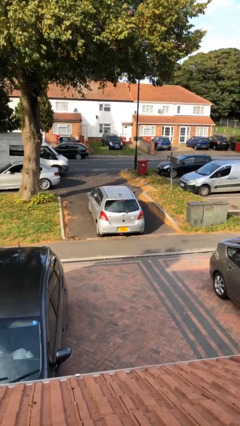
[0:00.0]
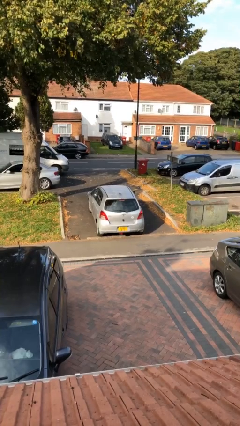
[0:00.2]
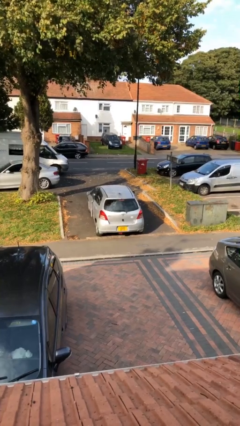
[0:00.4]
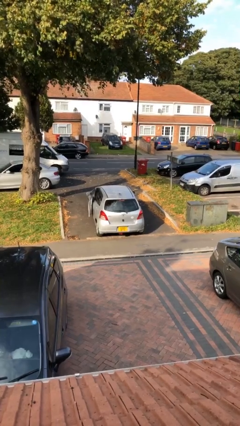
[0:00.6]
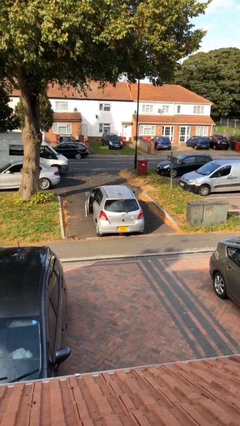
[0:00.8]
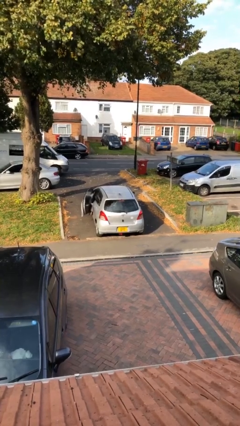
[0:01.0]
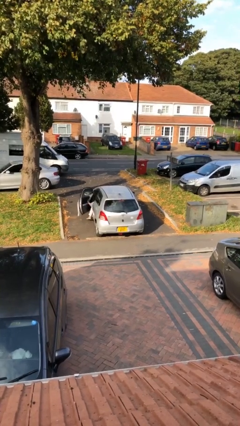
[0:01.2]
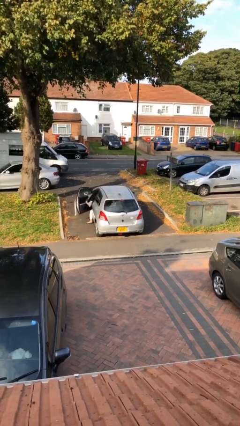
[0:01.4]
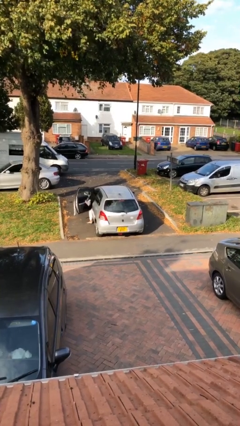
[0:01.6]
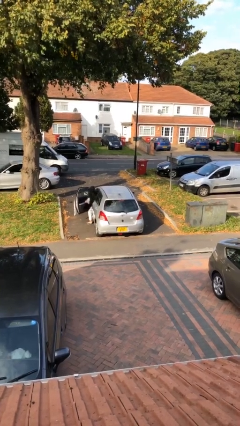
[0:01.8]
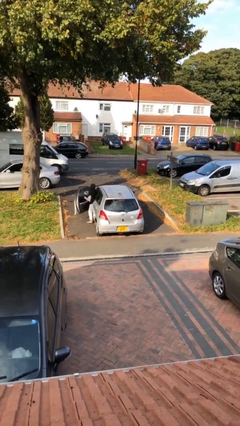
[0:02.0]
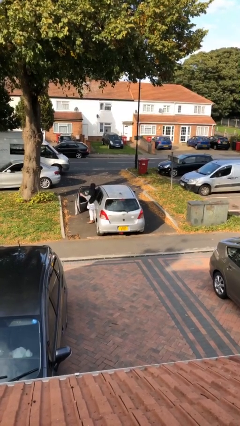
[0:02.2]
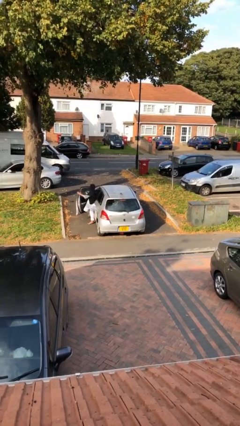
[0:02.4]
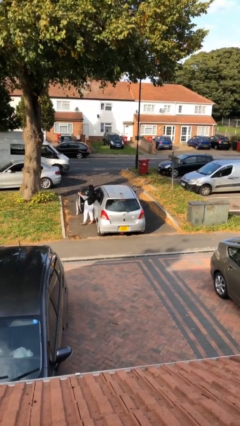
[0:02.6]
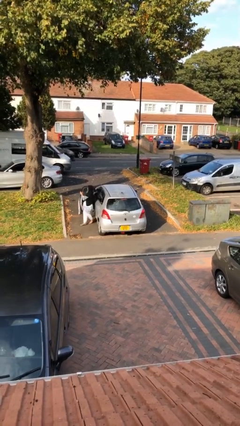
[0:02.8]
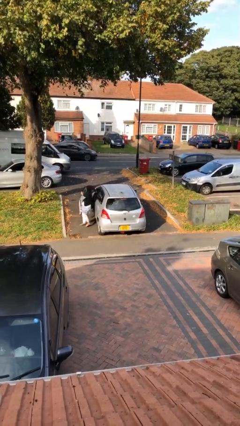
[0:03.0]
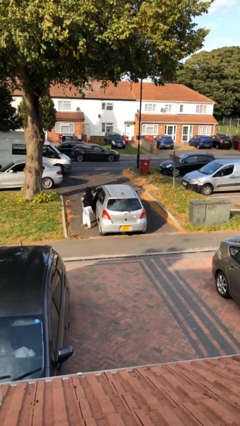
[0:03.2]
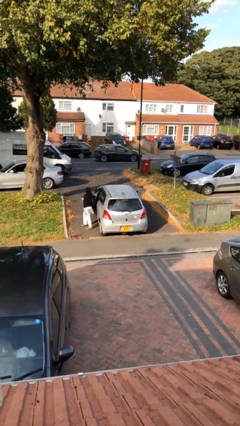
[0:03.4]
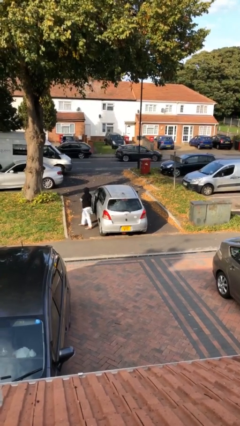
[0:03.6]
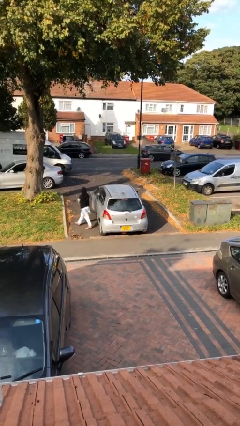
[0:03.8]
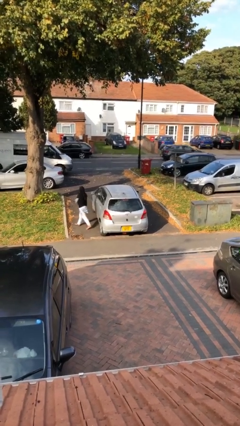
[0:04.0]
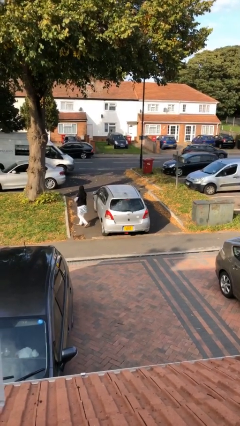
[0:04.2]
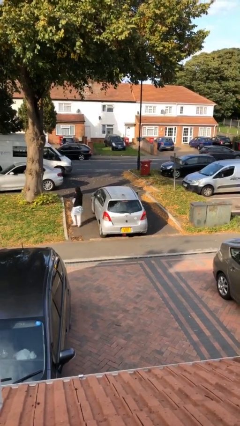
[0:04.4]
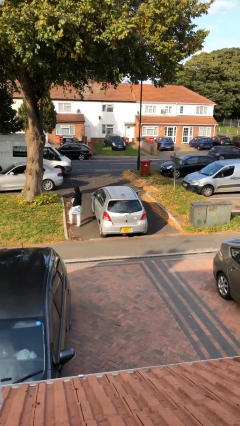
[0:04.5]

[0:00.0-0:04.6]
car drops off person

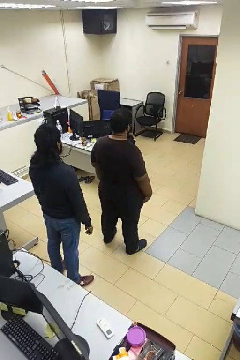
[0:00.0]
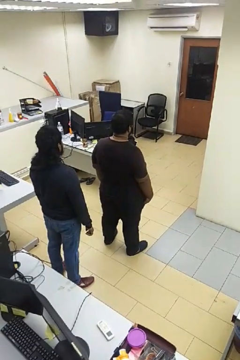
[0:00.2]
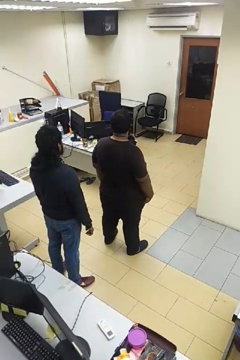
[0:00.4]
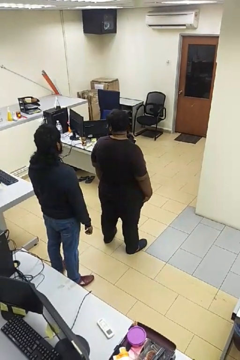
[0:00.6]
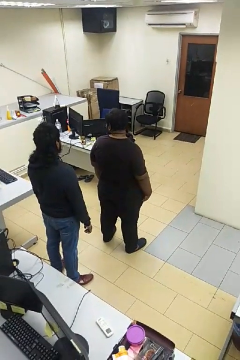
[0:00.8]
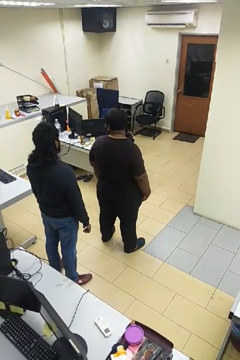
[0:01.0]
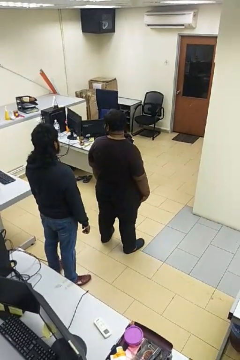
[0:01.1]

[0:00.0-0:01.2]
person looks over shoulder

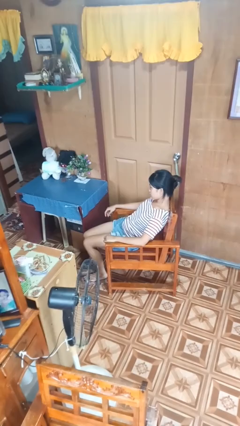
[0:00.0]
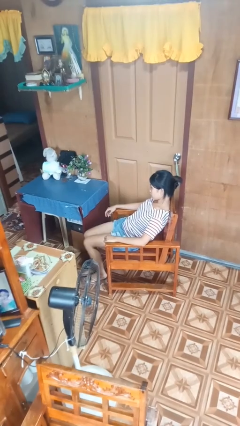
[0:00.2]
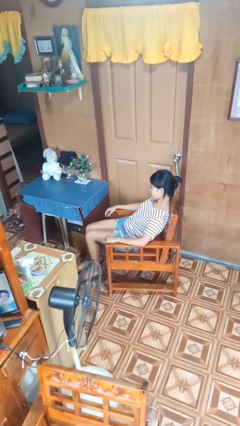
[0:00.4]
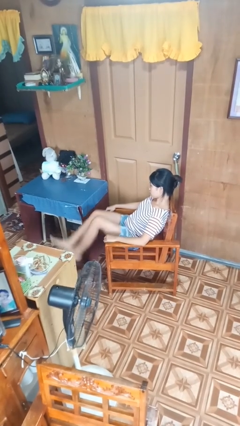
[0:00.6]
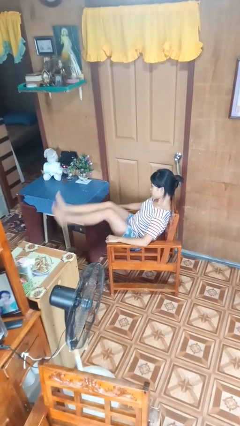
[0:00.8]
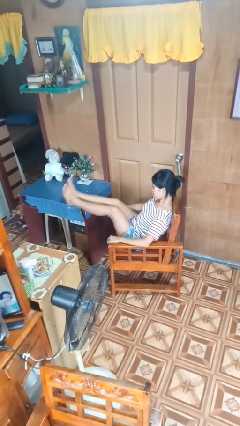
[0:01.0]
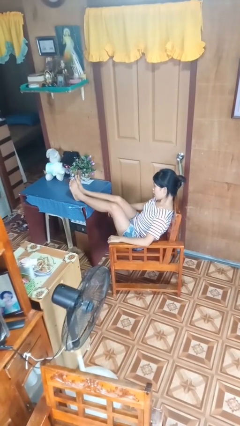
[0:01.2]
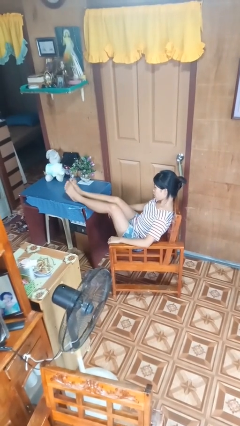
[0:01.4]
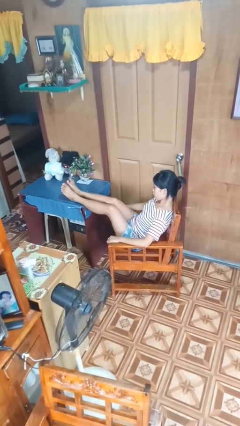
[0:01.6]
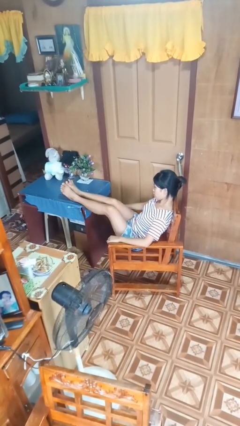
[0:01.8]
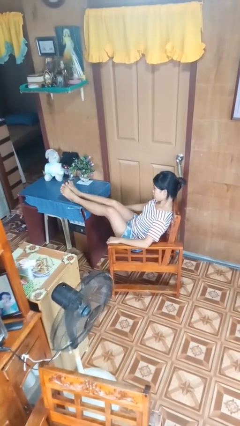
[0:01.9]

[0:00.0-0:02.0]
person puts feet up

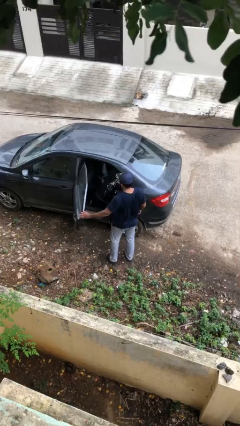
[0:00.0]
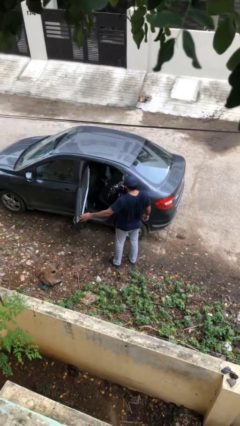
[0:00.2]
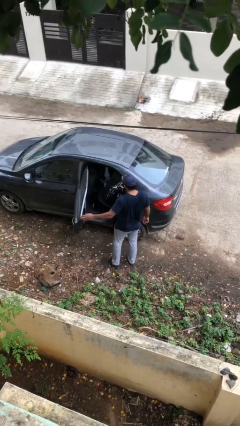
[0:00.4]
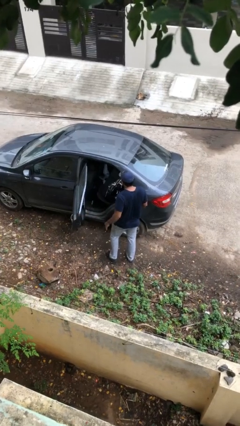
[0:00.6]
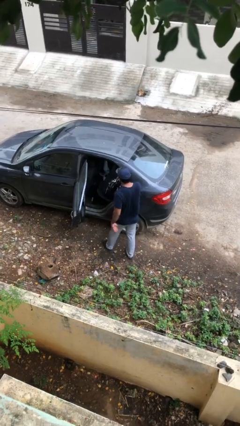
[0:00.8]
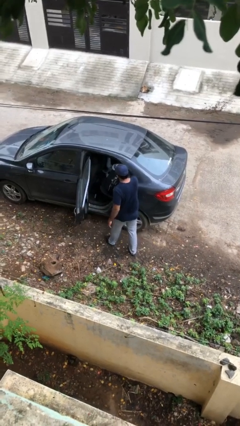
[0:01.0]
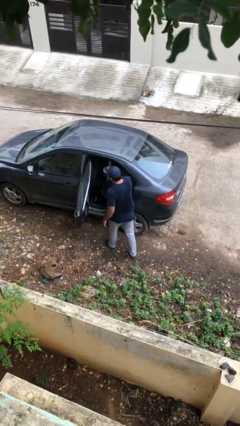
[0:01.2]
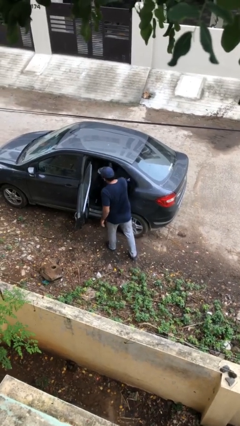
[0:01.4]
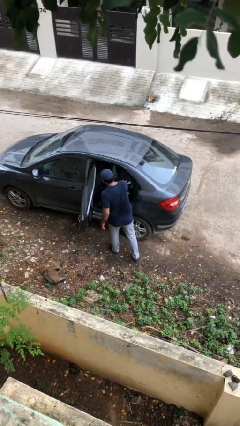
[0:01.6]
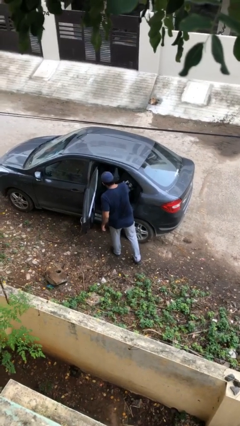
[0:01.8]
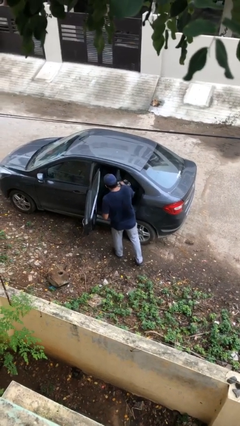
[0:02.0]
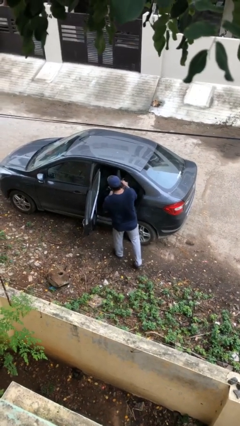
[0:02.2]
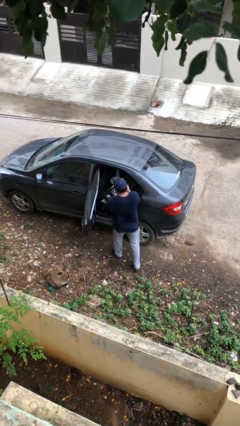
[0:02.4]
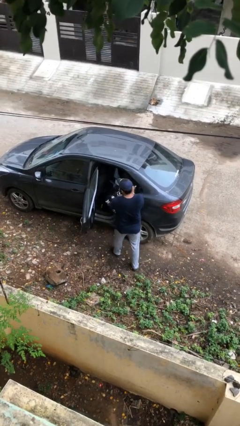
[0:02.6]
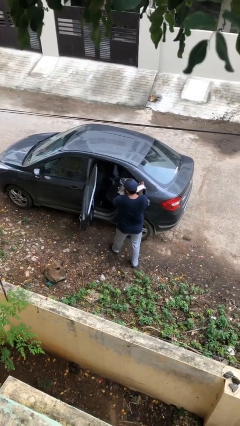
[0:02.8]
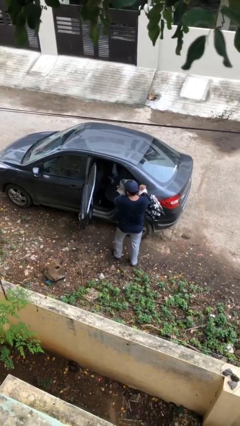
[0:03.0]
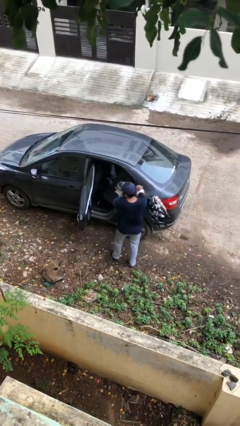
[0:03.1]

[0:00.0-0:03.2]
person unloads car

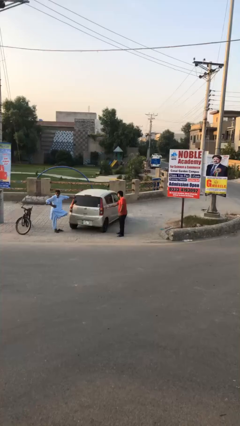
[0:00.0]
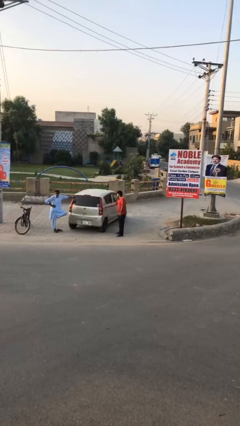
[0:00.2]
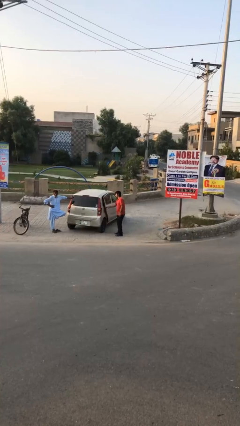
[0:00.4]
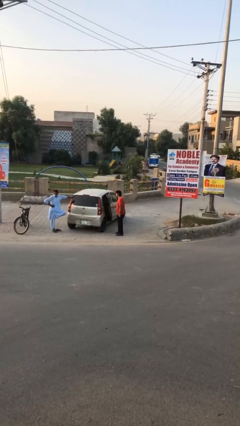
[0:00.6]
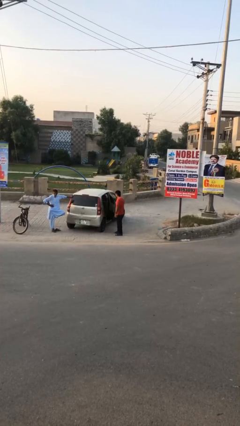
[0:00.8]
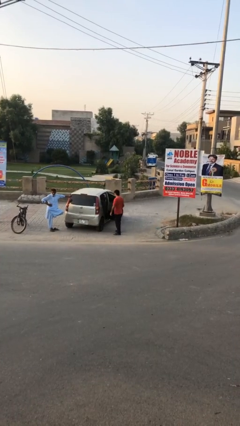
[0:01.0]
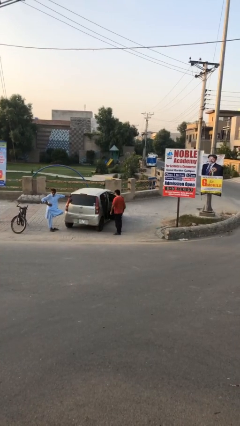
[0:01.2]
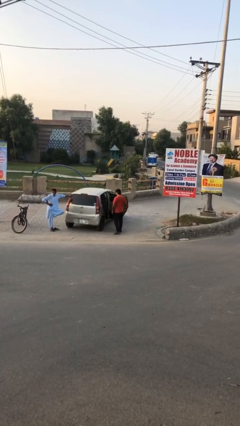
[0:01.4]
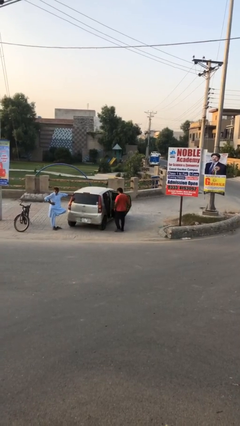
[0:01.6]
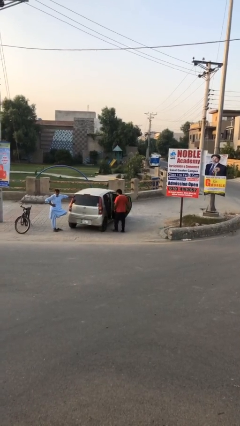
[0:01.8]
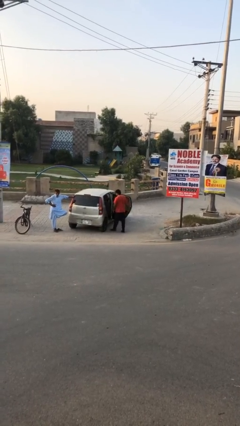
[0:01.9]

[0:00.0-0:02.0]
person opens car door

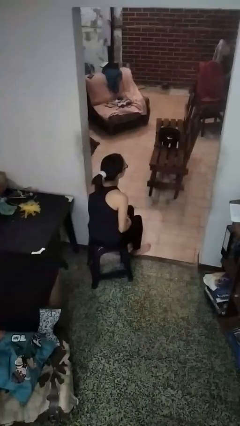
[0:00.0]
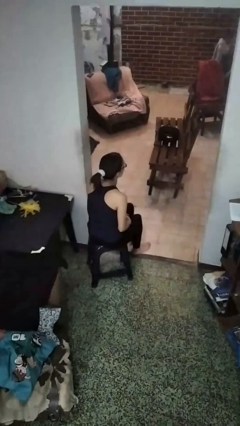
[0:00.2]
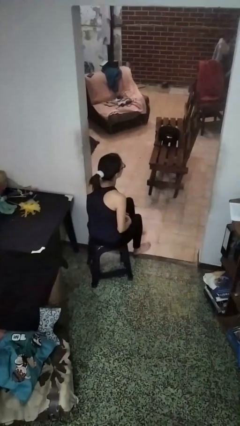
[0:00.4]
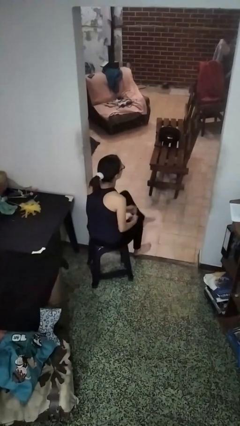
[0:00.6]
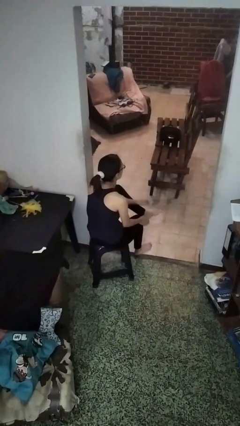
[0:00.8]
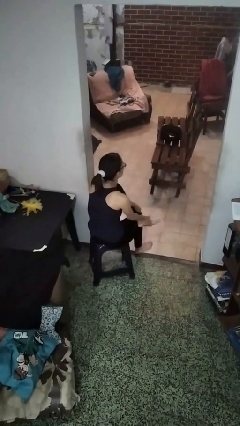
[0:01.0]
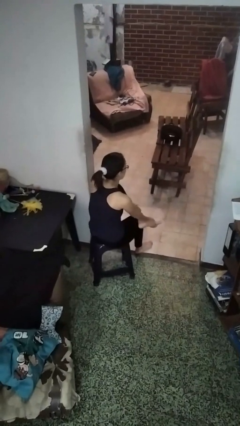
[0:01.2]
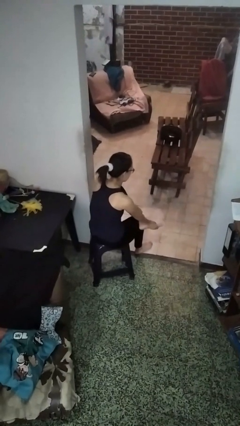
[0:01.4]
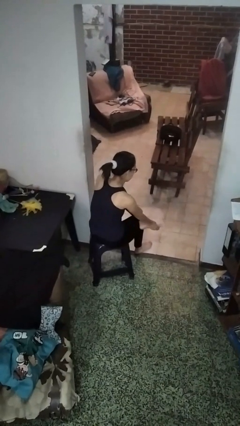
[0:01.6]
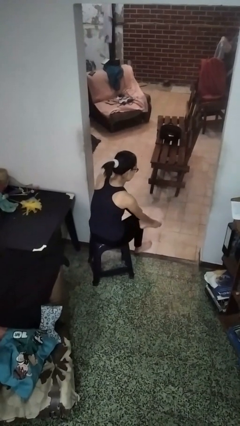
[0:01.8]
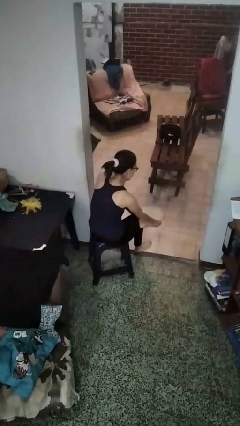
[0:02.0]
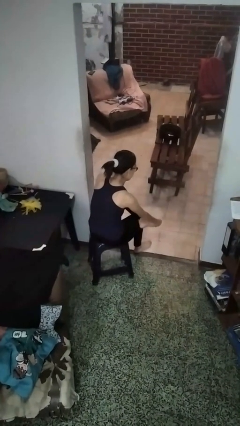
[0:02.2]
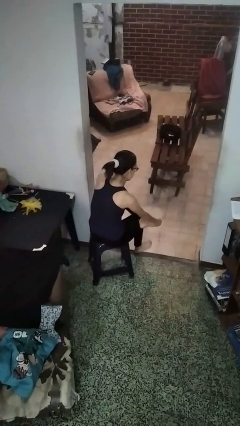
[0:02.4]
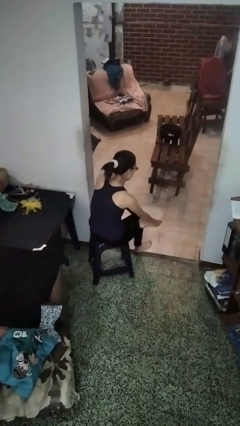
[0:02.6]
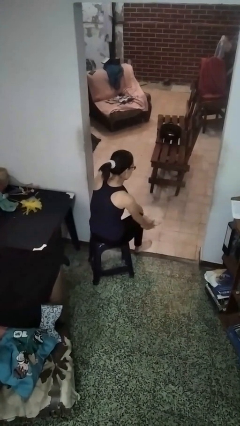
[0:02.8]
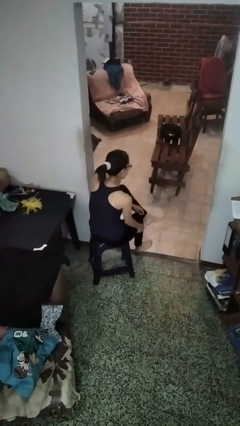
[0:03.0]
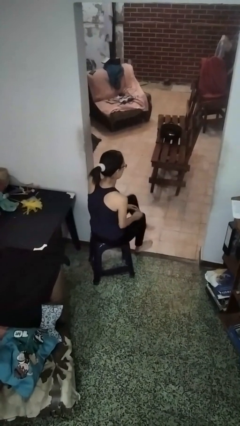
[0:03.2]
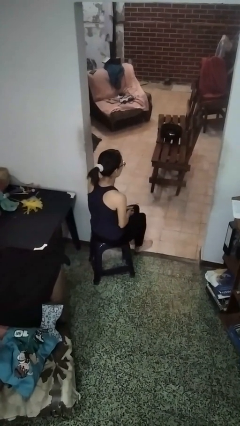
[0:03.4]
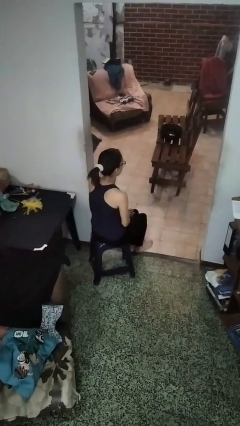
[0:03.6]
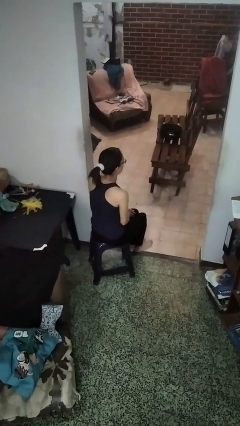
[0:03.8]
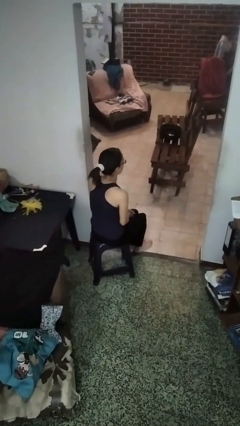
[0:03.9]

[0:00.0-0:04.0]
person rubs foot

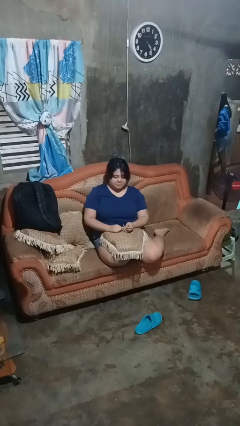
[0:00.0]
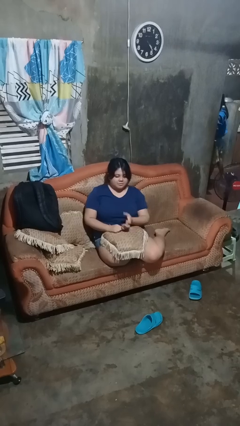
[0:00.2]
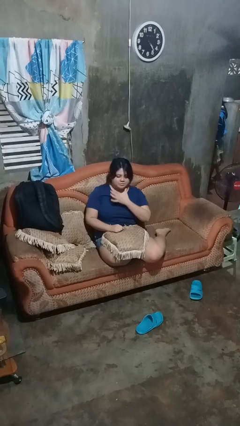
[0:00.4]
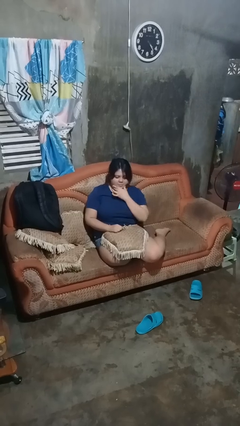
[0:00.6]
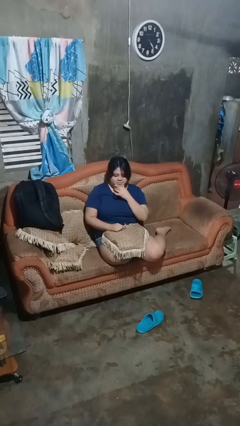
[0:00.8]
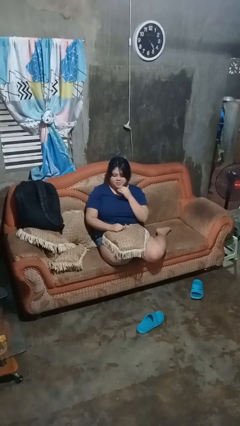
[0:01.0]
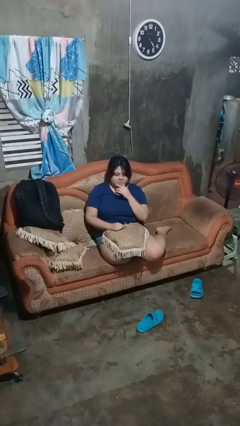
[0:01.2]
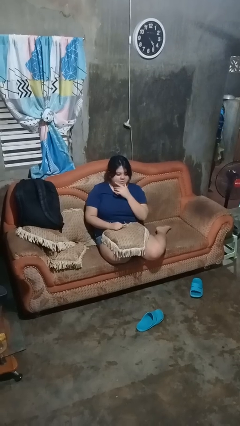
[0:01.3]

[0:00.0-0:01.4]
person strokes chin
